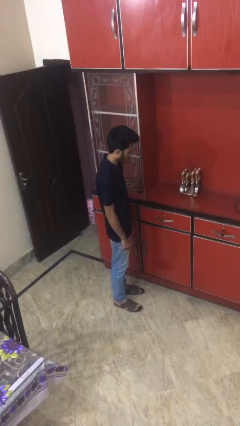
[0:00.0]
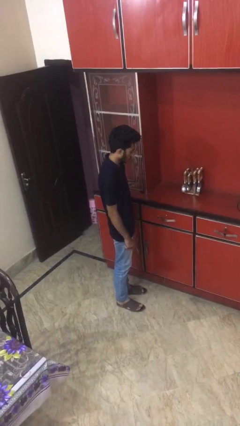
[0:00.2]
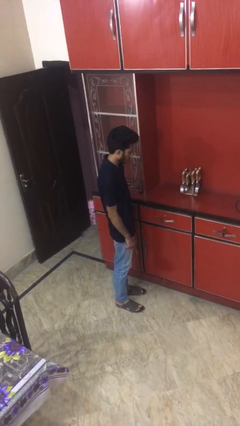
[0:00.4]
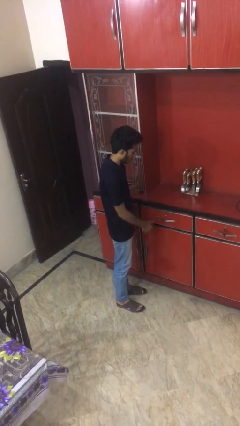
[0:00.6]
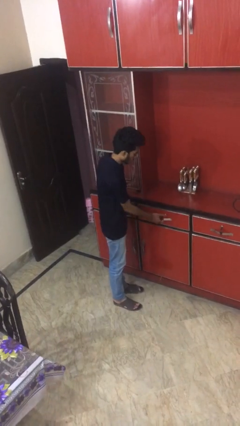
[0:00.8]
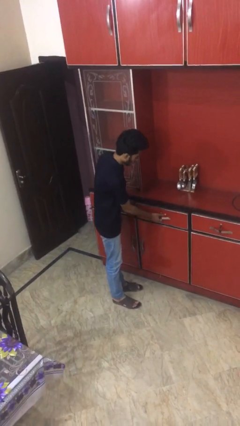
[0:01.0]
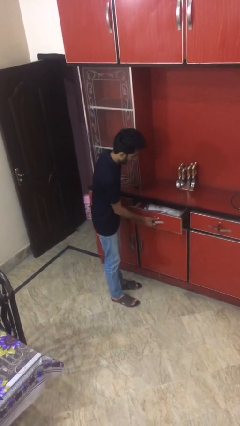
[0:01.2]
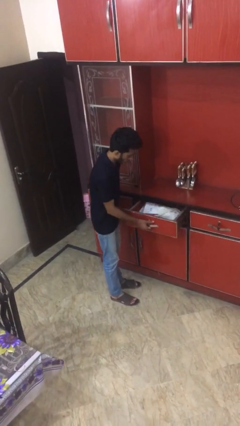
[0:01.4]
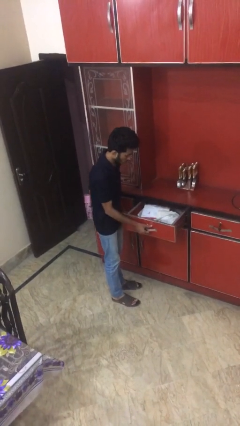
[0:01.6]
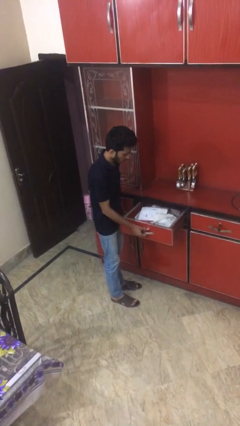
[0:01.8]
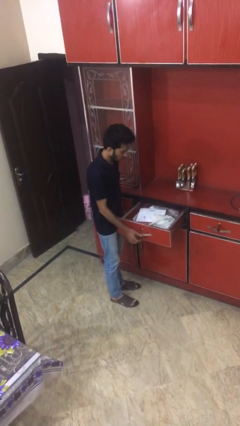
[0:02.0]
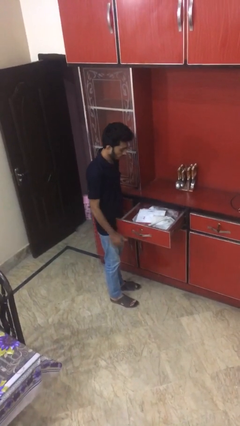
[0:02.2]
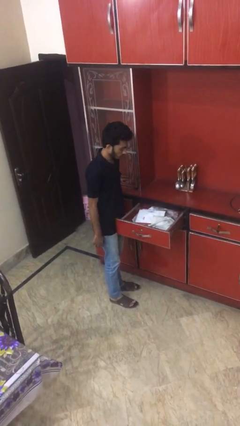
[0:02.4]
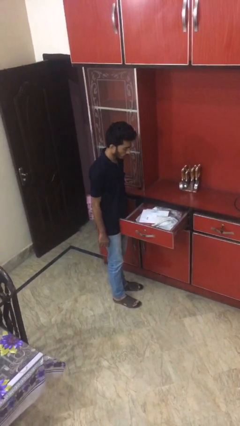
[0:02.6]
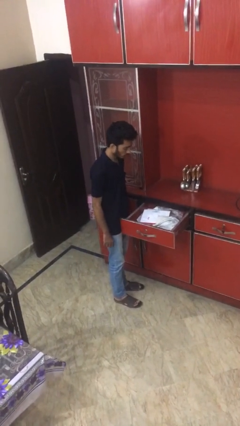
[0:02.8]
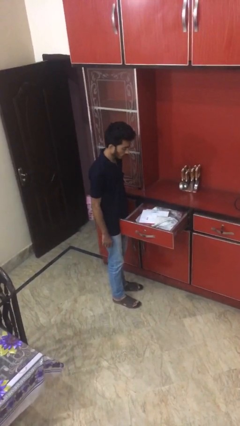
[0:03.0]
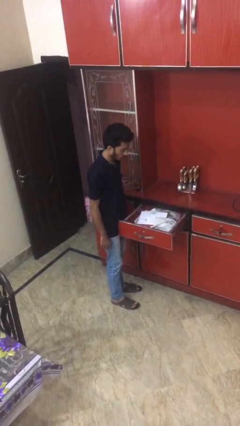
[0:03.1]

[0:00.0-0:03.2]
person opens kitchen drawer

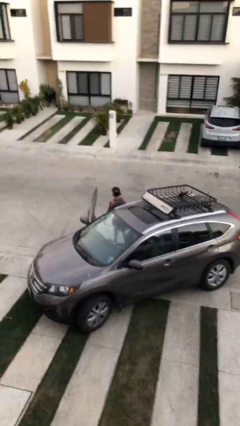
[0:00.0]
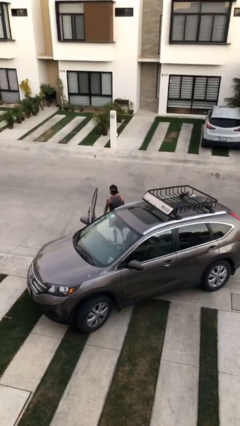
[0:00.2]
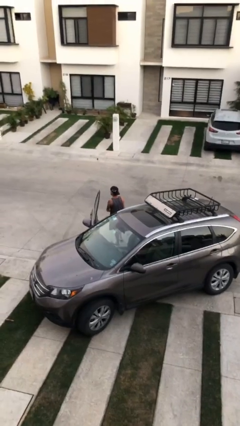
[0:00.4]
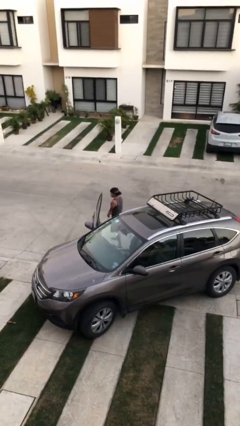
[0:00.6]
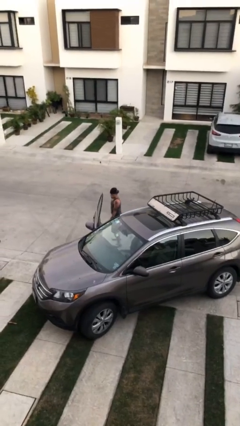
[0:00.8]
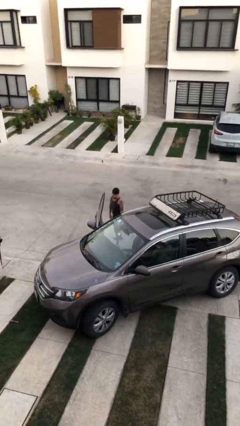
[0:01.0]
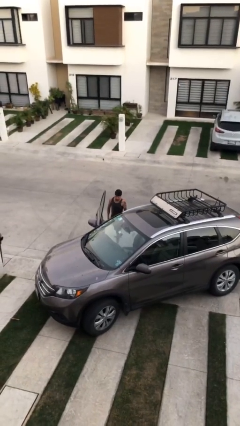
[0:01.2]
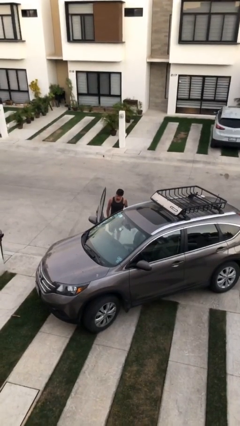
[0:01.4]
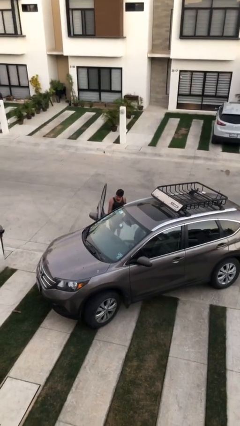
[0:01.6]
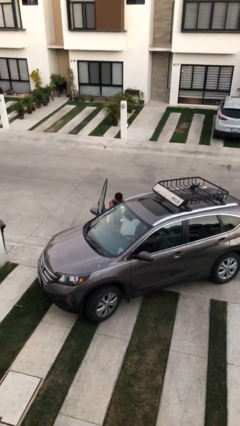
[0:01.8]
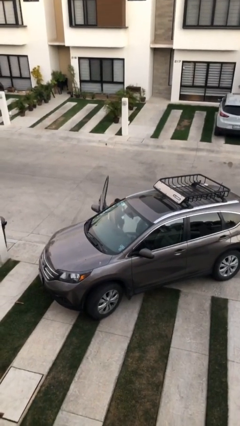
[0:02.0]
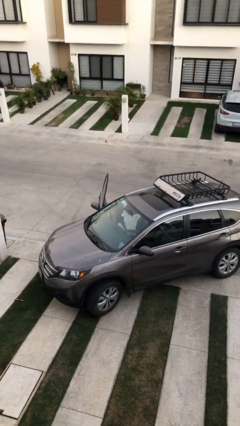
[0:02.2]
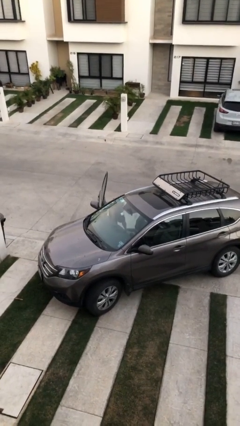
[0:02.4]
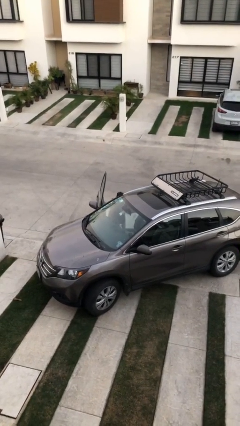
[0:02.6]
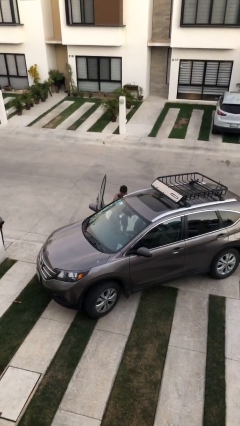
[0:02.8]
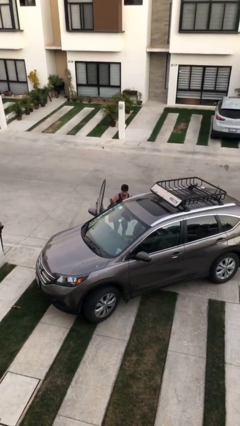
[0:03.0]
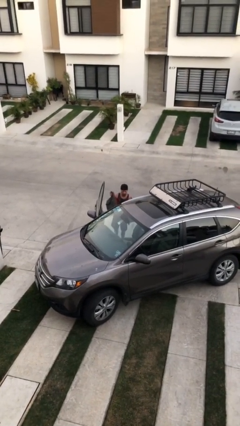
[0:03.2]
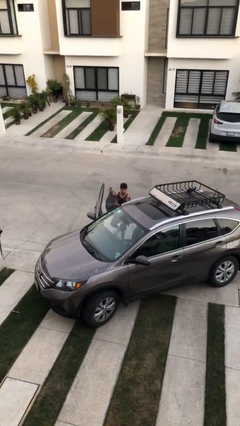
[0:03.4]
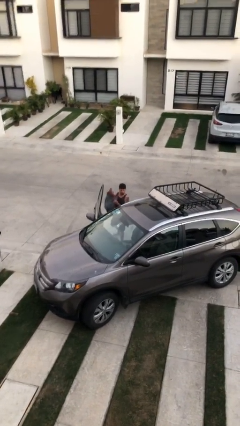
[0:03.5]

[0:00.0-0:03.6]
person unloads car

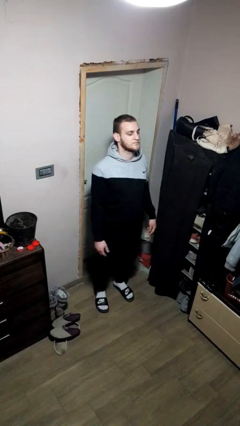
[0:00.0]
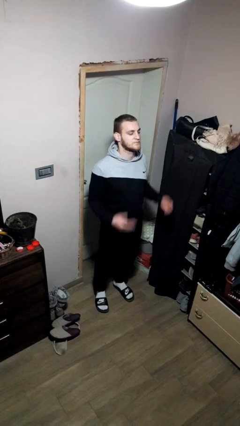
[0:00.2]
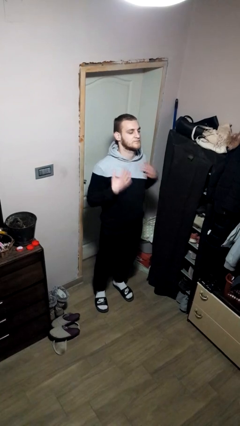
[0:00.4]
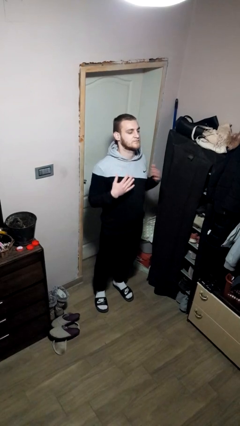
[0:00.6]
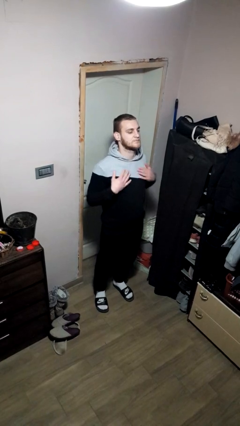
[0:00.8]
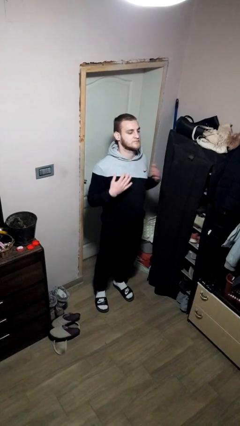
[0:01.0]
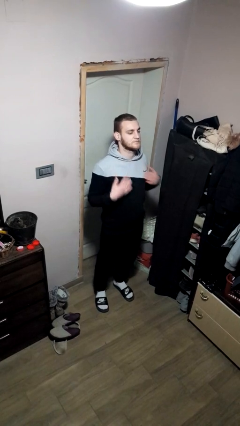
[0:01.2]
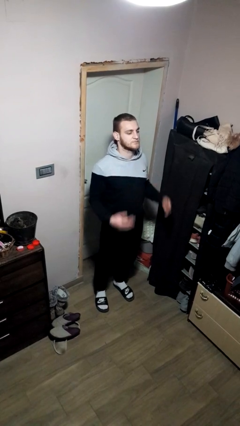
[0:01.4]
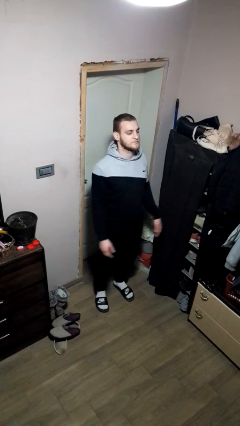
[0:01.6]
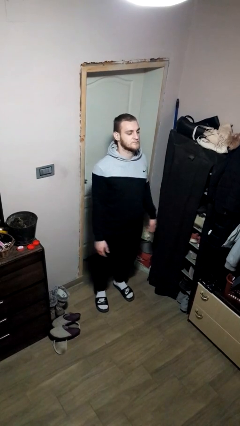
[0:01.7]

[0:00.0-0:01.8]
person drums on chest

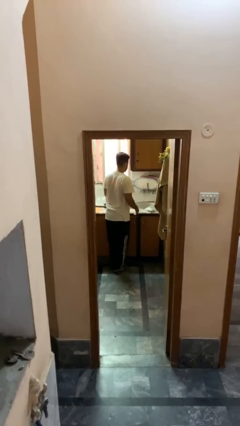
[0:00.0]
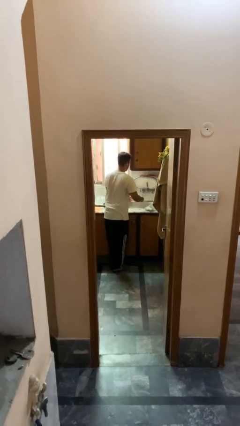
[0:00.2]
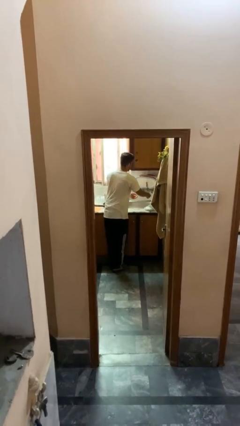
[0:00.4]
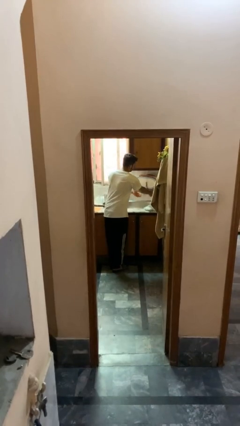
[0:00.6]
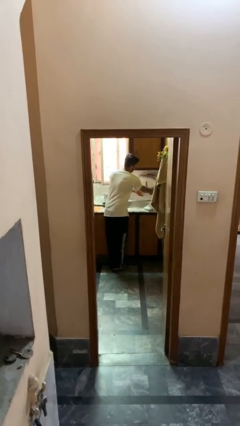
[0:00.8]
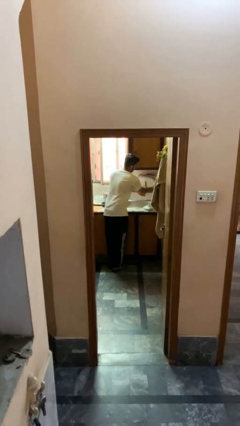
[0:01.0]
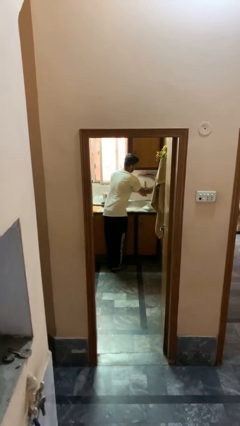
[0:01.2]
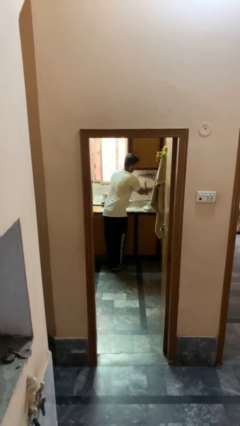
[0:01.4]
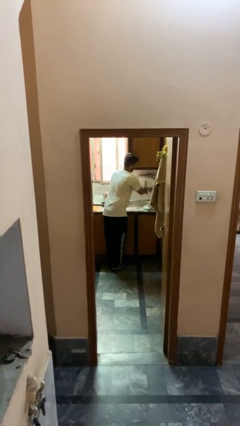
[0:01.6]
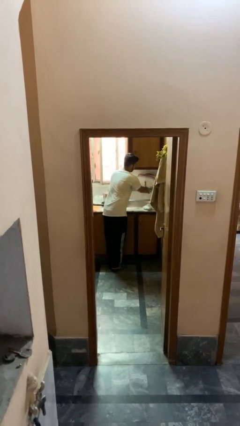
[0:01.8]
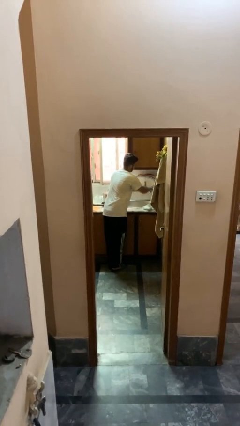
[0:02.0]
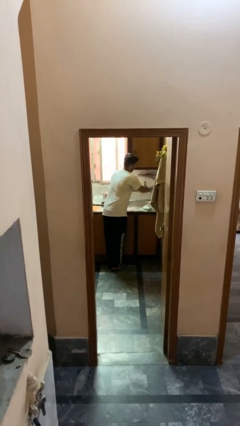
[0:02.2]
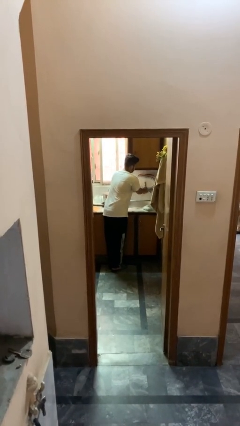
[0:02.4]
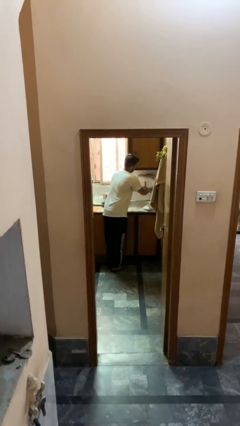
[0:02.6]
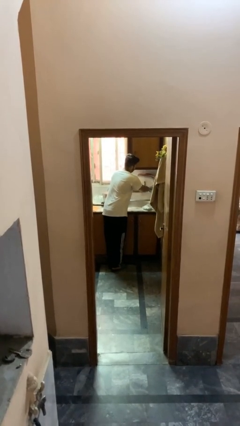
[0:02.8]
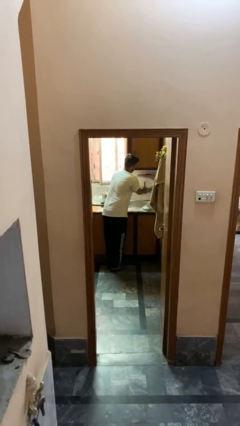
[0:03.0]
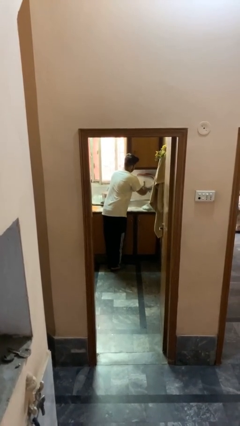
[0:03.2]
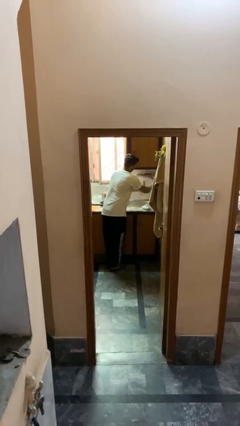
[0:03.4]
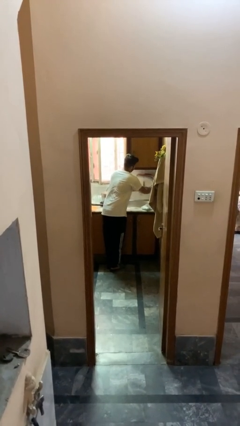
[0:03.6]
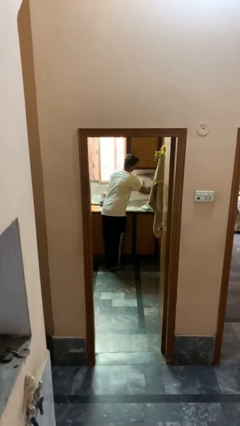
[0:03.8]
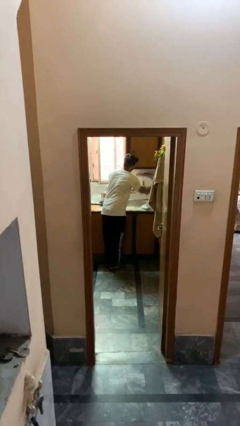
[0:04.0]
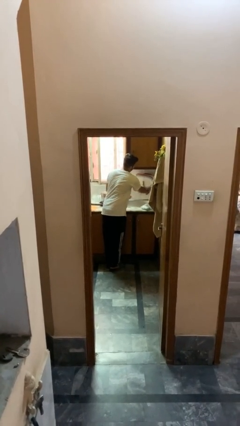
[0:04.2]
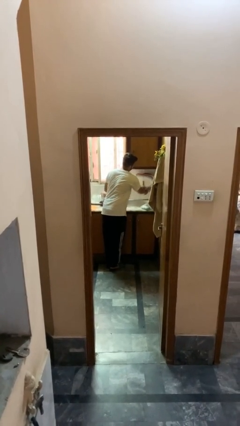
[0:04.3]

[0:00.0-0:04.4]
person washes hands

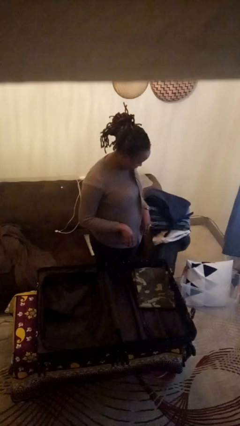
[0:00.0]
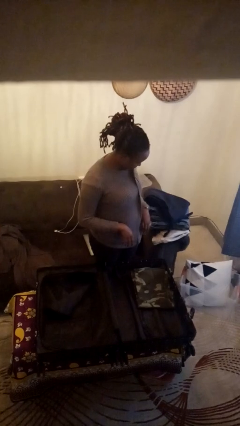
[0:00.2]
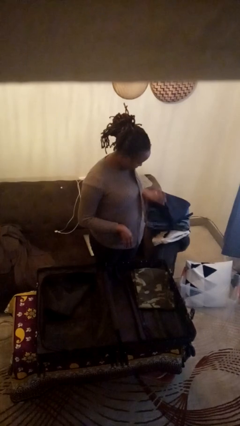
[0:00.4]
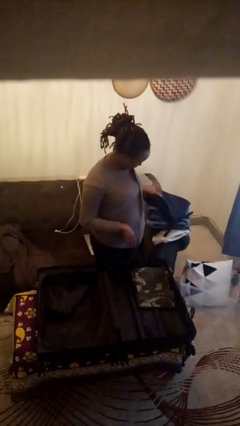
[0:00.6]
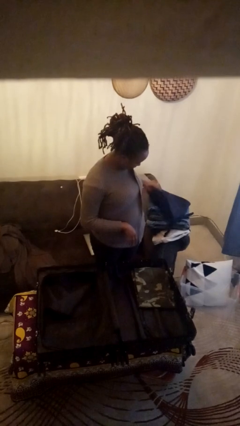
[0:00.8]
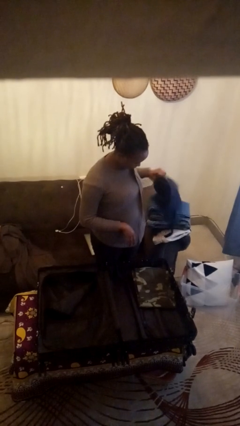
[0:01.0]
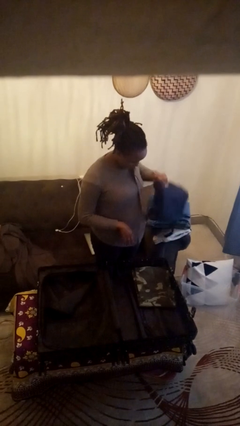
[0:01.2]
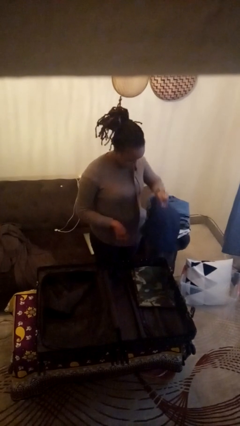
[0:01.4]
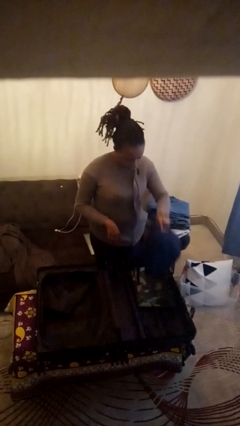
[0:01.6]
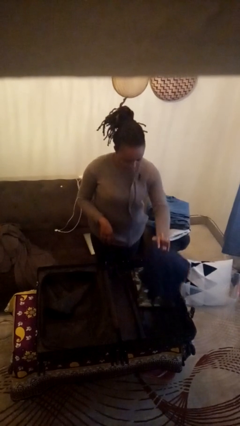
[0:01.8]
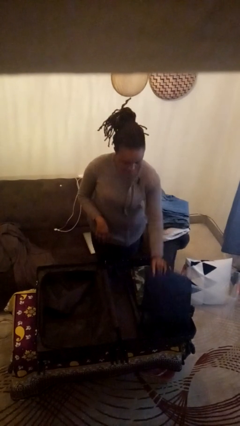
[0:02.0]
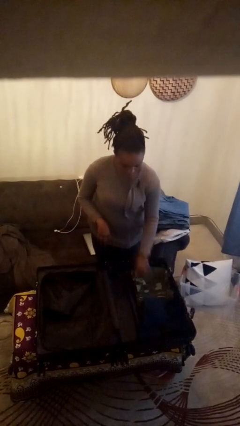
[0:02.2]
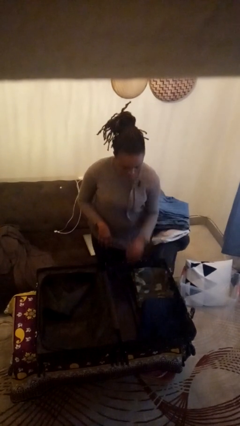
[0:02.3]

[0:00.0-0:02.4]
person loads clothes into suitcase

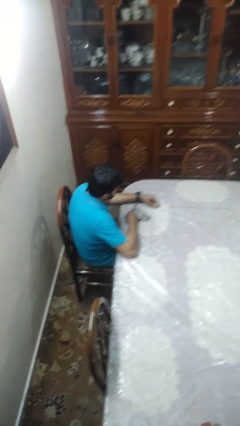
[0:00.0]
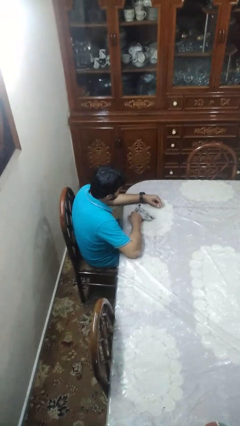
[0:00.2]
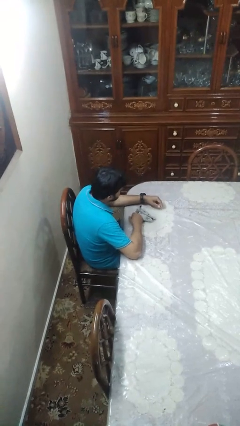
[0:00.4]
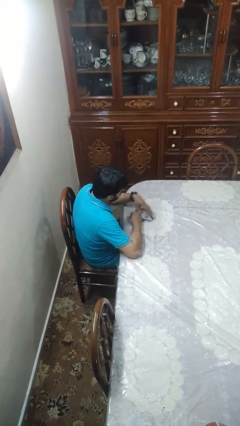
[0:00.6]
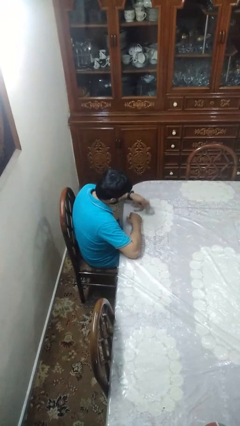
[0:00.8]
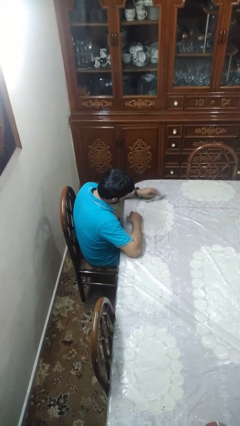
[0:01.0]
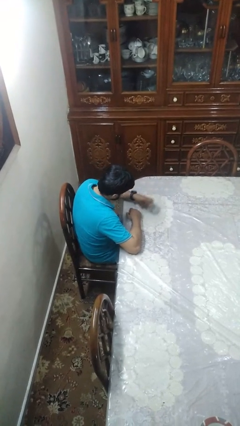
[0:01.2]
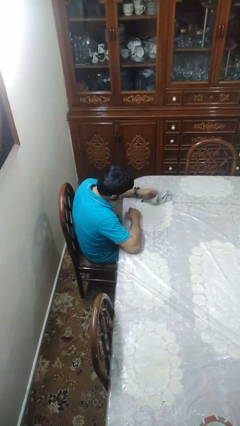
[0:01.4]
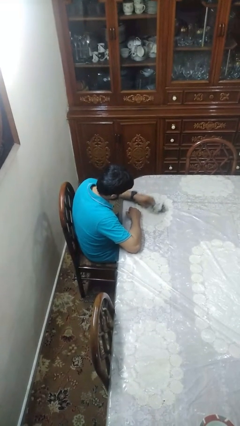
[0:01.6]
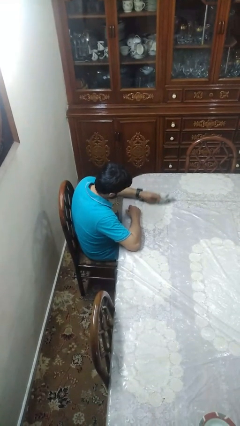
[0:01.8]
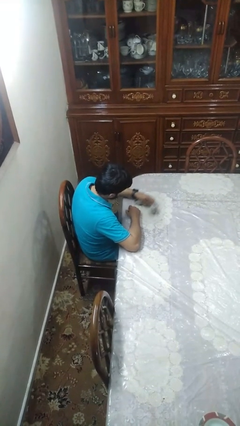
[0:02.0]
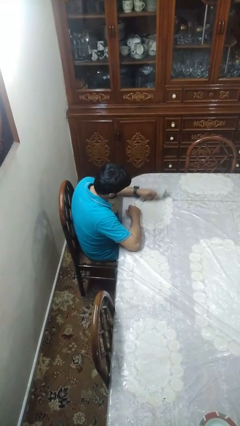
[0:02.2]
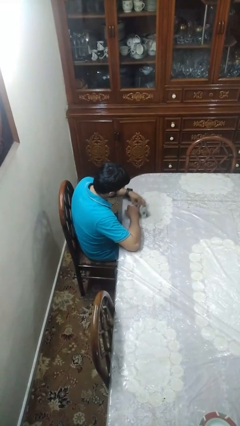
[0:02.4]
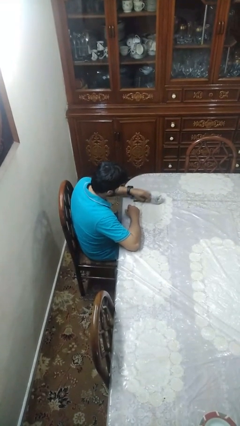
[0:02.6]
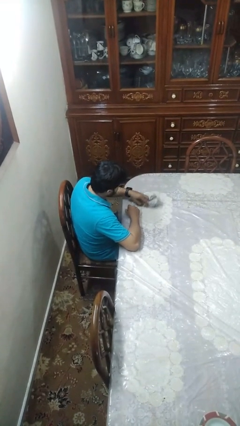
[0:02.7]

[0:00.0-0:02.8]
person cleans table with rag
